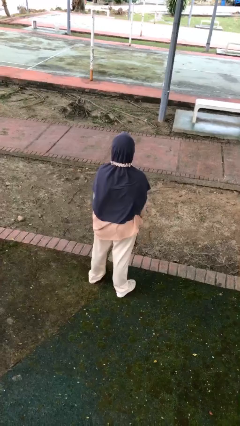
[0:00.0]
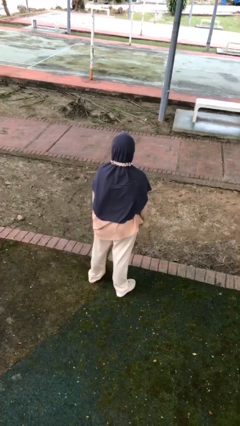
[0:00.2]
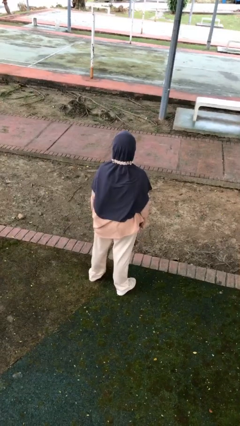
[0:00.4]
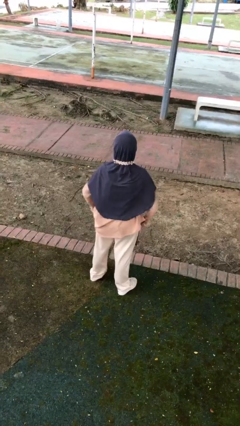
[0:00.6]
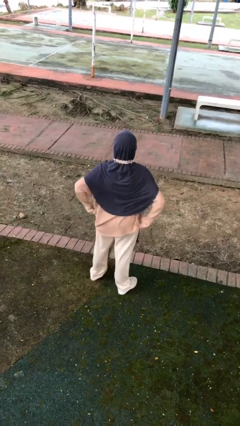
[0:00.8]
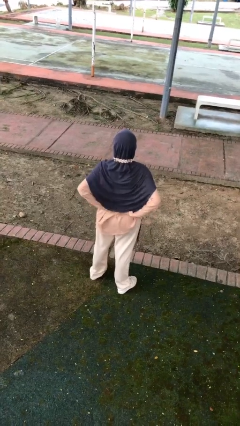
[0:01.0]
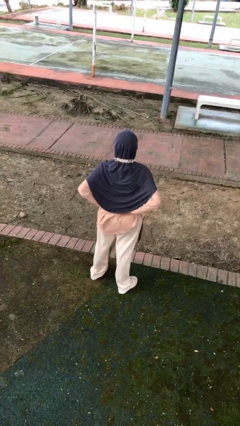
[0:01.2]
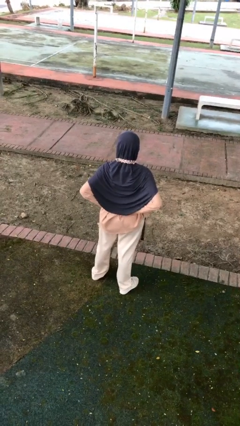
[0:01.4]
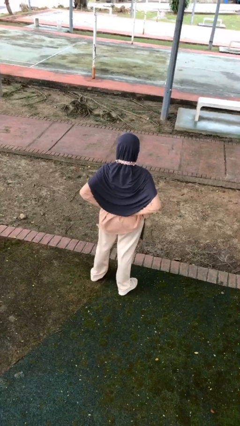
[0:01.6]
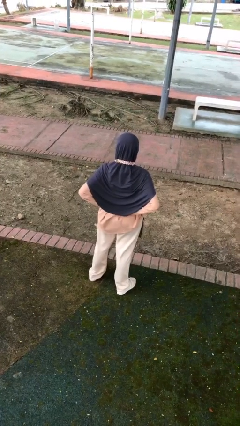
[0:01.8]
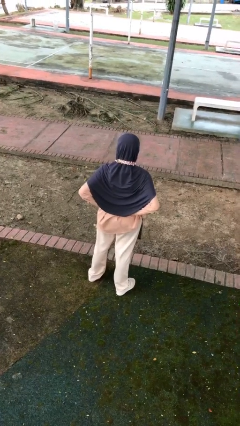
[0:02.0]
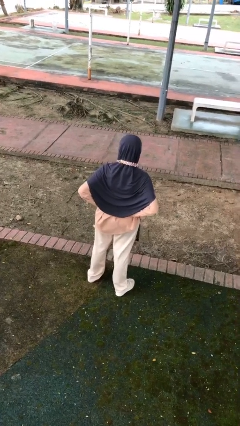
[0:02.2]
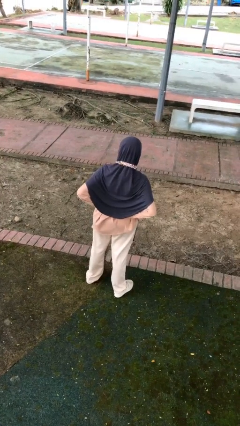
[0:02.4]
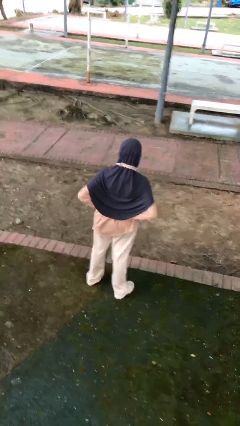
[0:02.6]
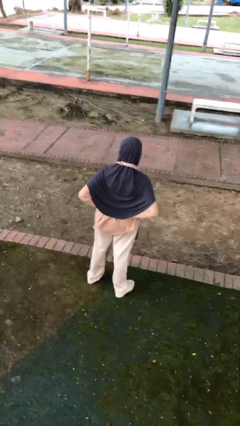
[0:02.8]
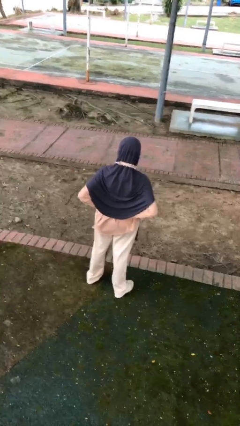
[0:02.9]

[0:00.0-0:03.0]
person stretches back

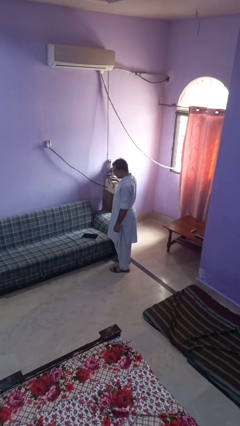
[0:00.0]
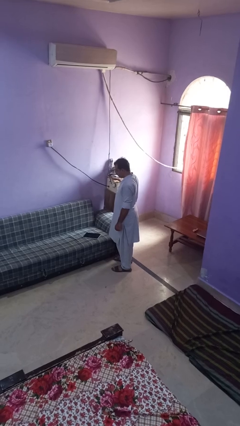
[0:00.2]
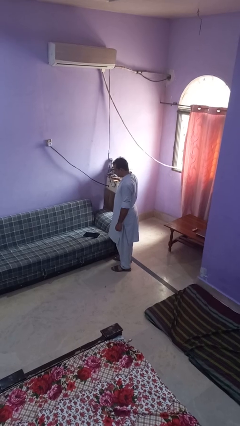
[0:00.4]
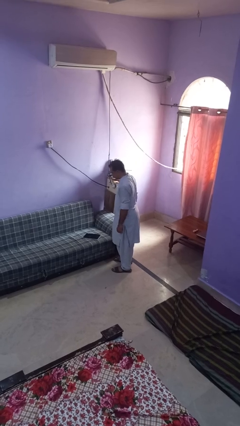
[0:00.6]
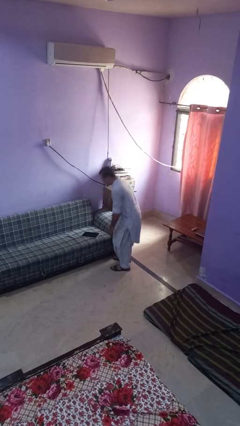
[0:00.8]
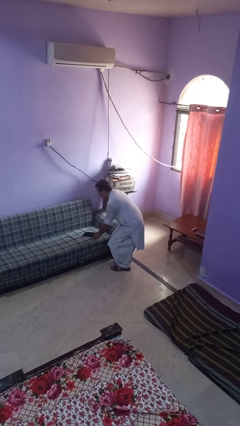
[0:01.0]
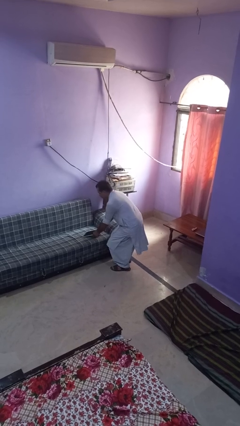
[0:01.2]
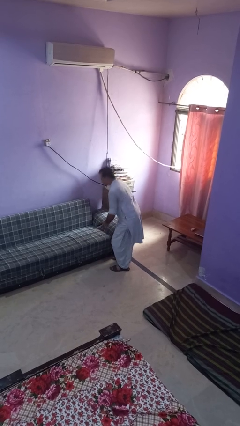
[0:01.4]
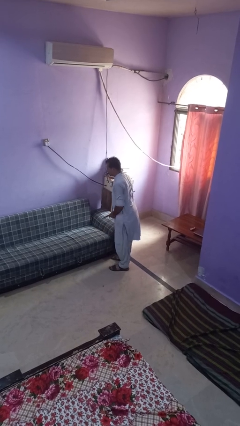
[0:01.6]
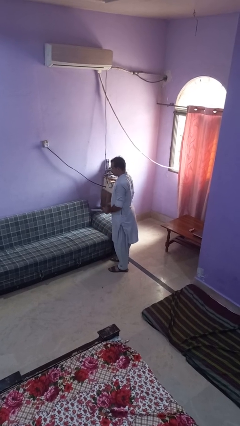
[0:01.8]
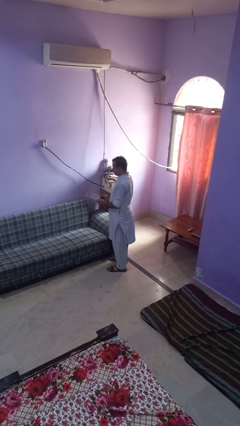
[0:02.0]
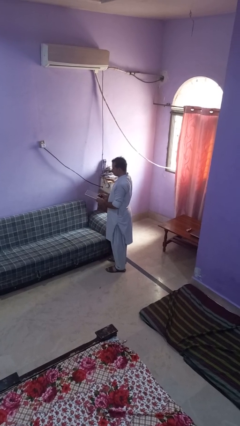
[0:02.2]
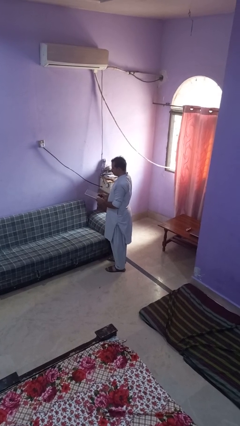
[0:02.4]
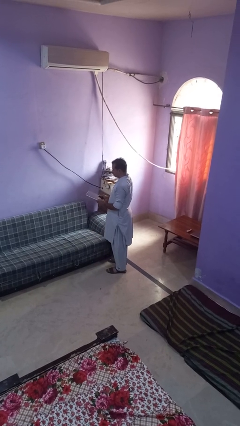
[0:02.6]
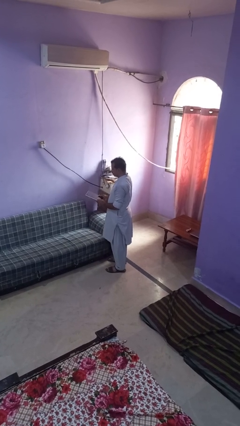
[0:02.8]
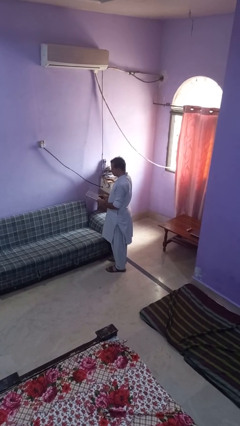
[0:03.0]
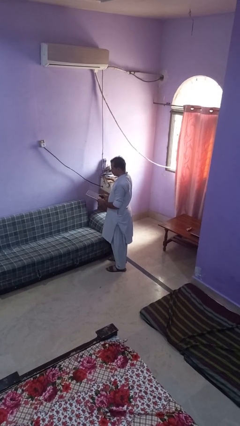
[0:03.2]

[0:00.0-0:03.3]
person picks up object from couch

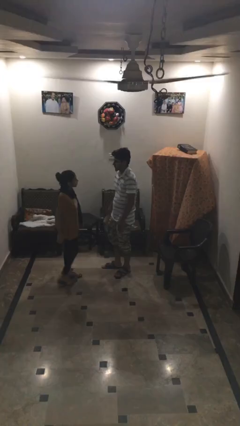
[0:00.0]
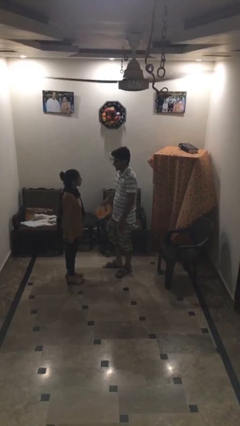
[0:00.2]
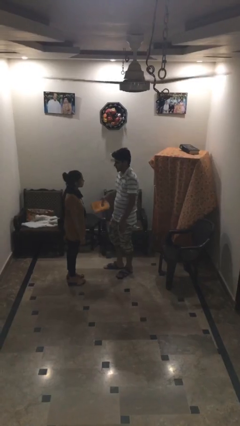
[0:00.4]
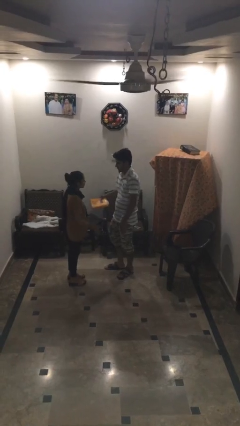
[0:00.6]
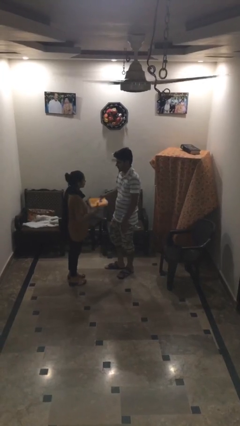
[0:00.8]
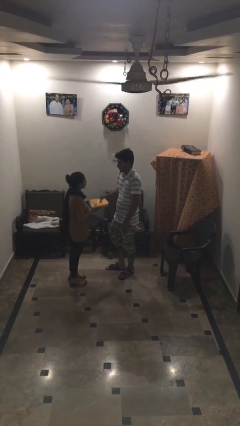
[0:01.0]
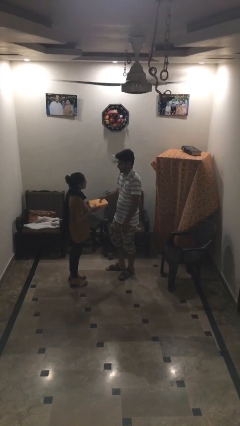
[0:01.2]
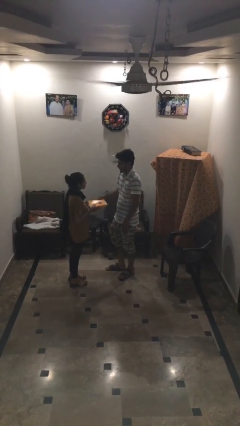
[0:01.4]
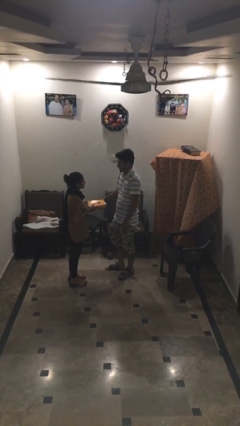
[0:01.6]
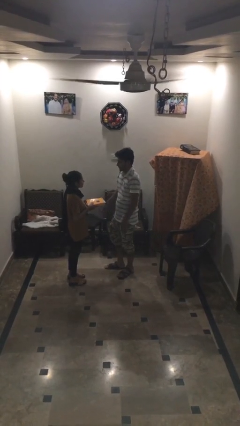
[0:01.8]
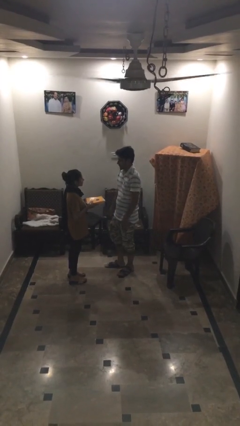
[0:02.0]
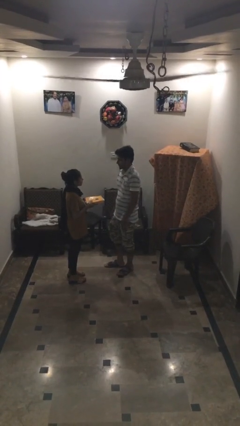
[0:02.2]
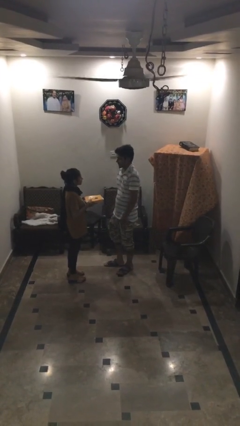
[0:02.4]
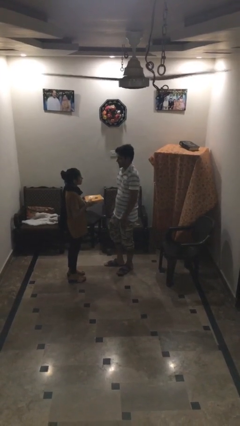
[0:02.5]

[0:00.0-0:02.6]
person transfers object to person

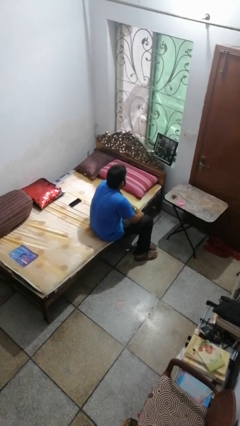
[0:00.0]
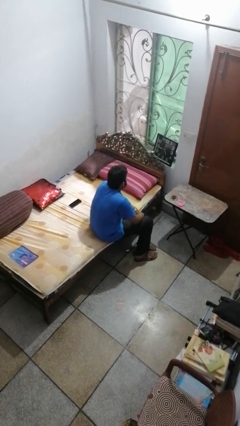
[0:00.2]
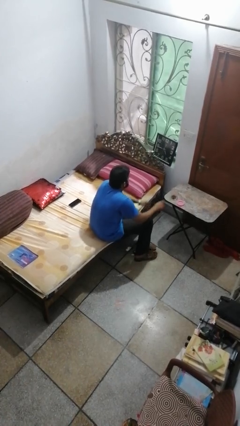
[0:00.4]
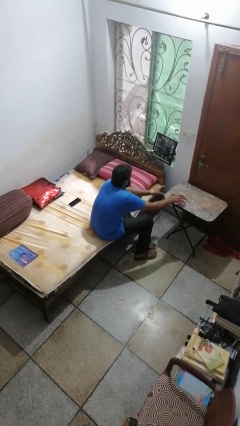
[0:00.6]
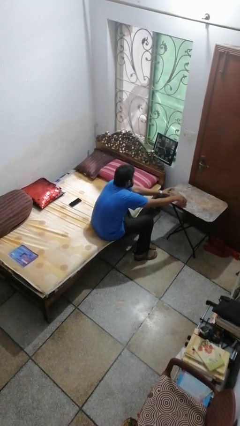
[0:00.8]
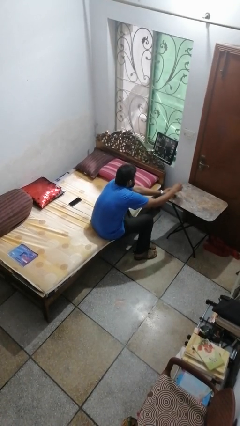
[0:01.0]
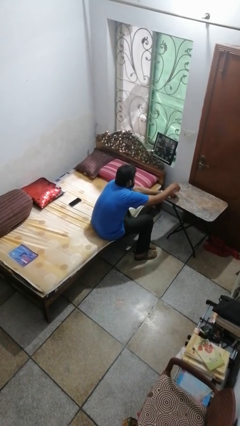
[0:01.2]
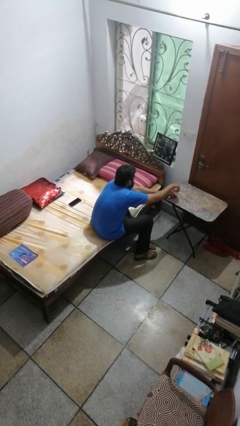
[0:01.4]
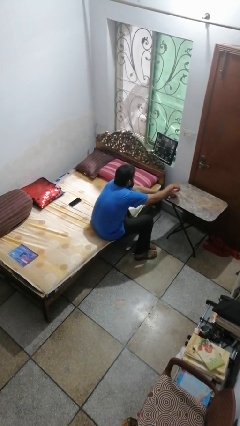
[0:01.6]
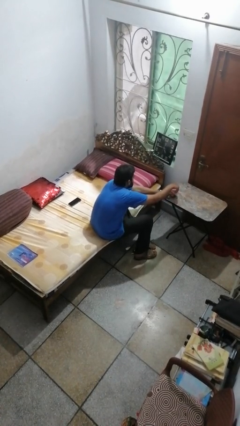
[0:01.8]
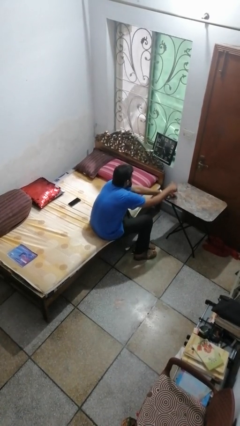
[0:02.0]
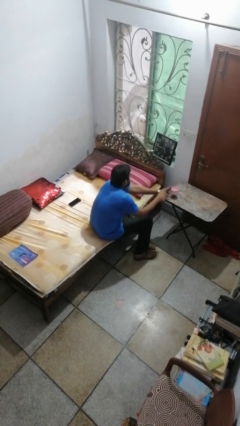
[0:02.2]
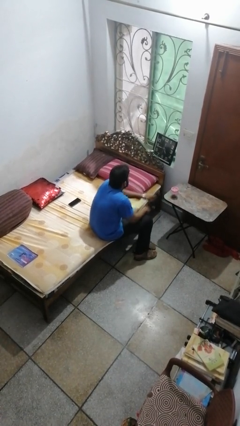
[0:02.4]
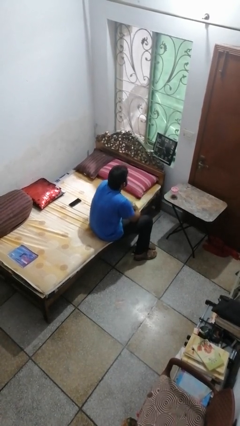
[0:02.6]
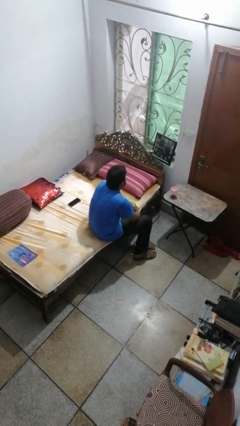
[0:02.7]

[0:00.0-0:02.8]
person closes jar

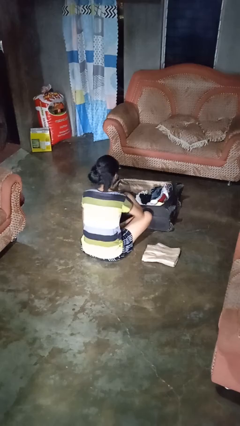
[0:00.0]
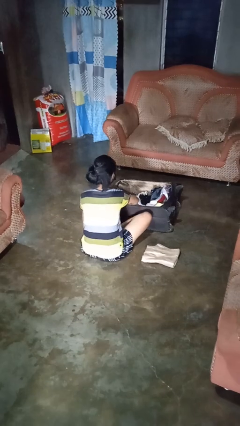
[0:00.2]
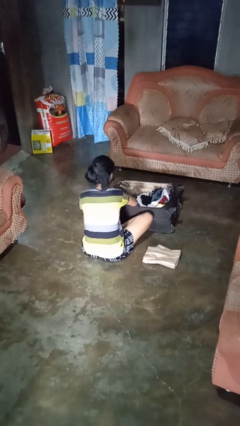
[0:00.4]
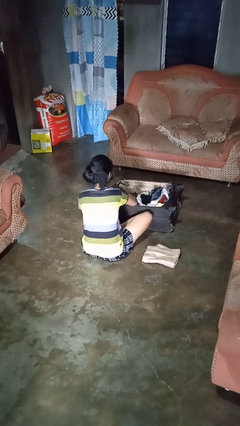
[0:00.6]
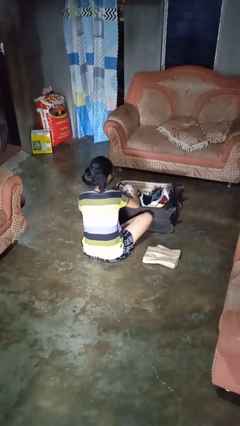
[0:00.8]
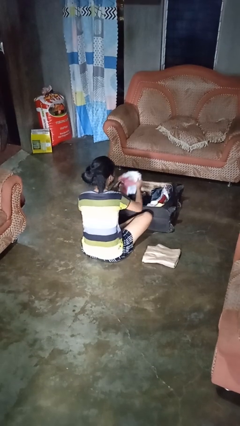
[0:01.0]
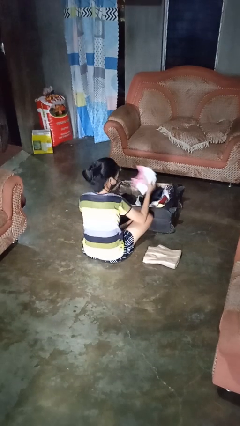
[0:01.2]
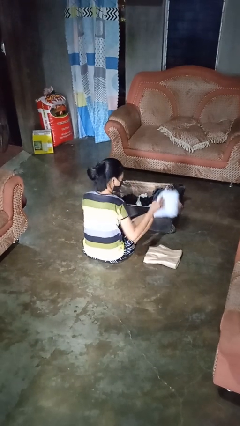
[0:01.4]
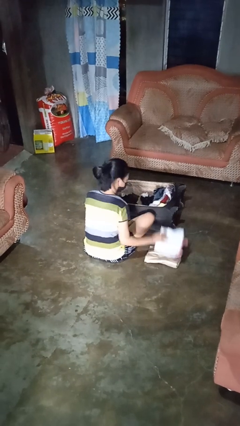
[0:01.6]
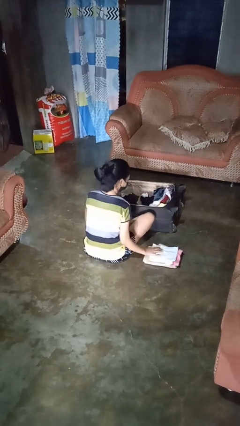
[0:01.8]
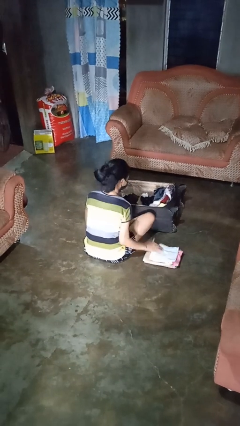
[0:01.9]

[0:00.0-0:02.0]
person unloads clothes from suitcase

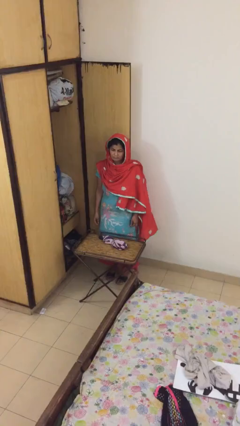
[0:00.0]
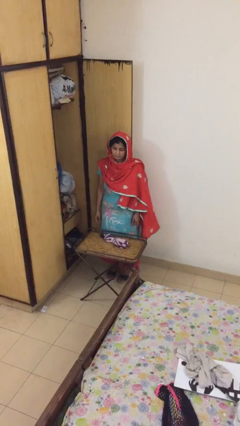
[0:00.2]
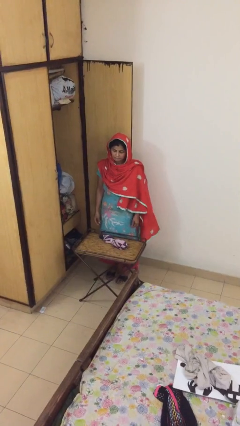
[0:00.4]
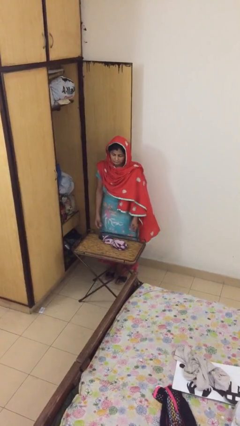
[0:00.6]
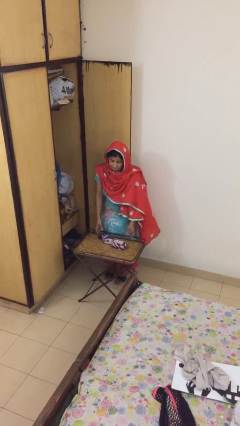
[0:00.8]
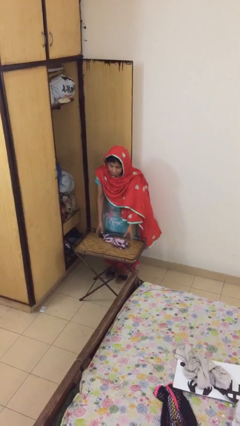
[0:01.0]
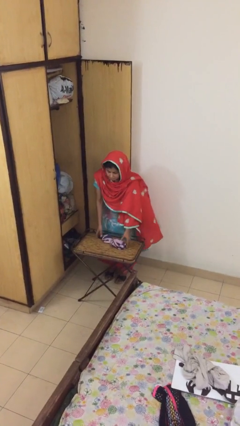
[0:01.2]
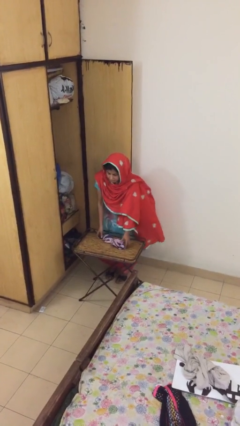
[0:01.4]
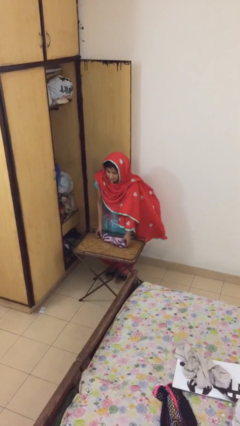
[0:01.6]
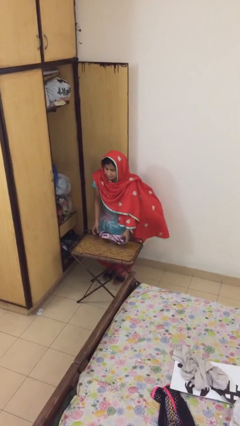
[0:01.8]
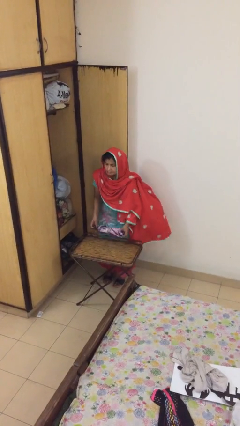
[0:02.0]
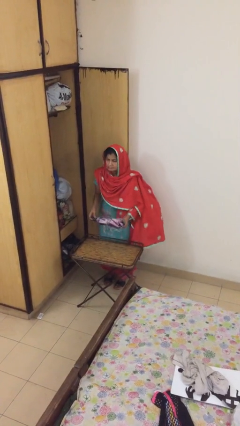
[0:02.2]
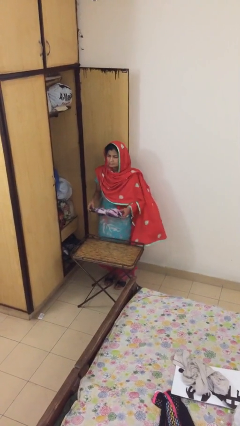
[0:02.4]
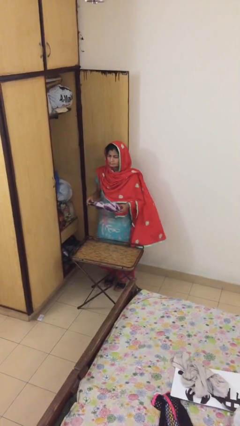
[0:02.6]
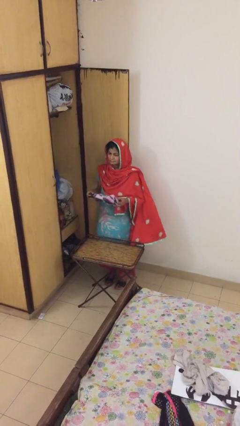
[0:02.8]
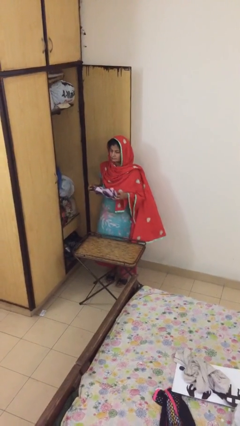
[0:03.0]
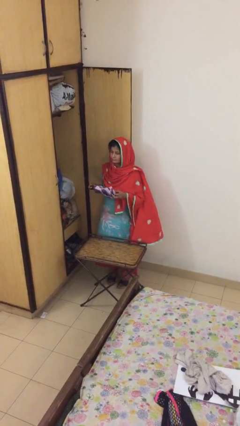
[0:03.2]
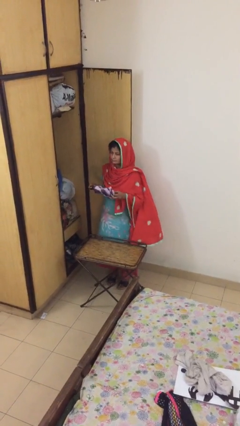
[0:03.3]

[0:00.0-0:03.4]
person picks up object from table
